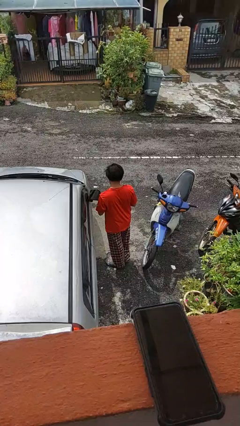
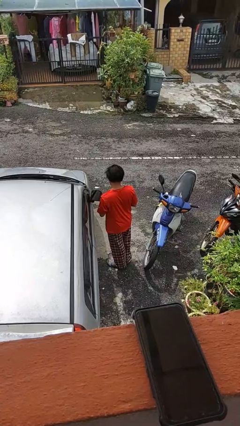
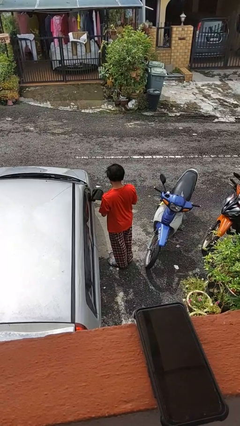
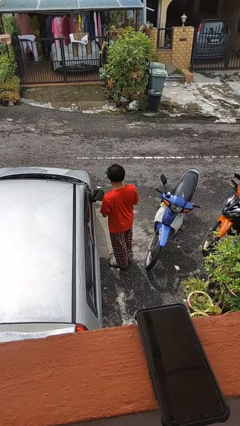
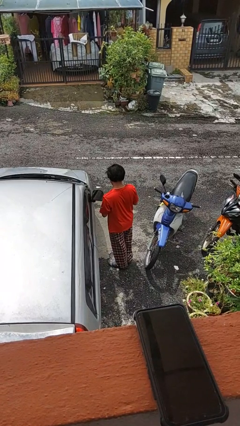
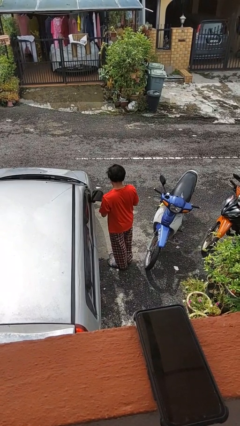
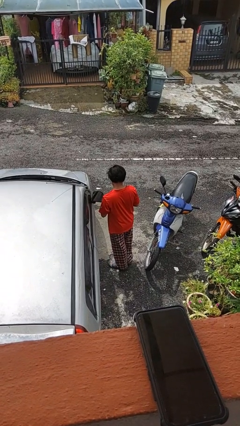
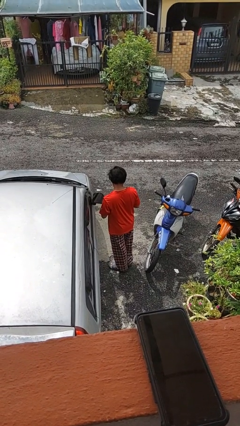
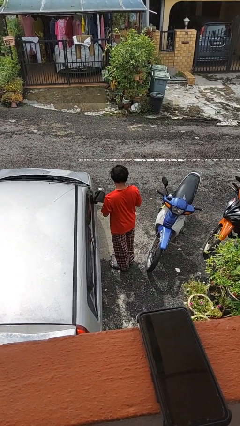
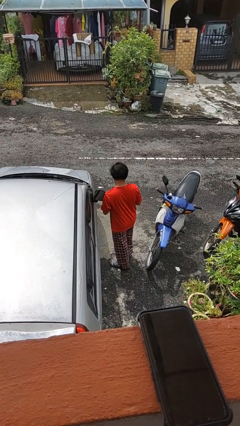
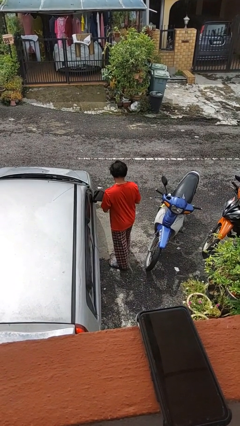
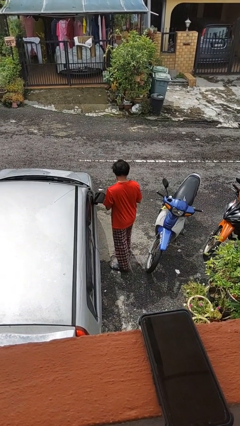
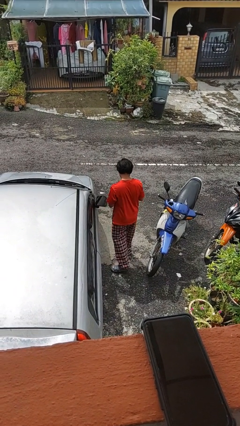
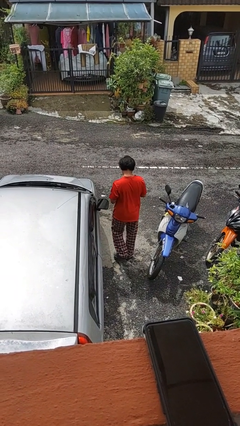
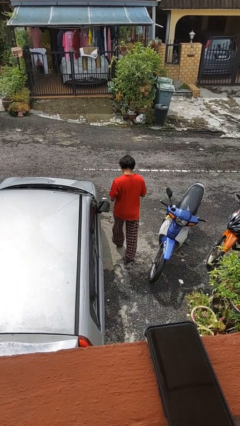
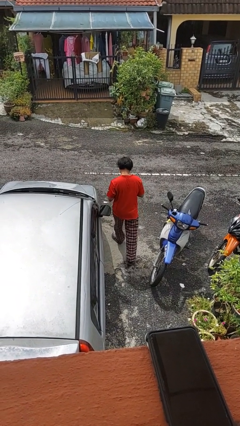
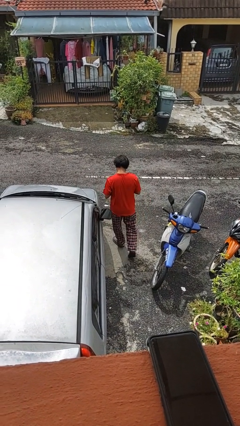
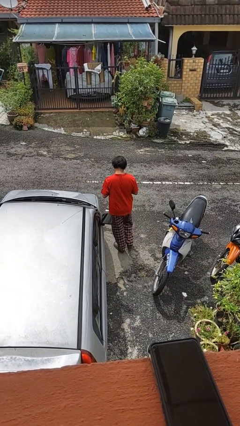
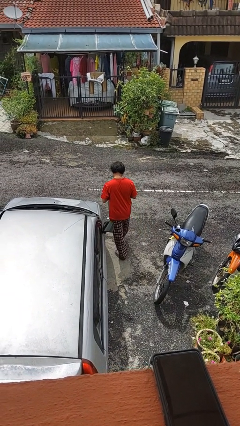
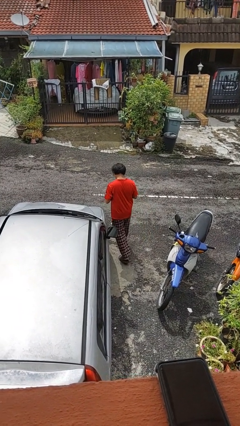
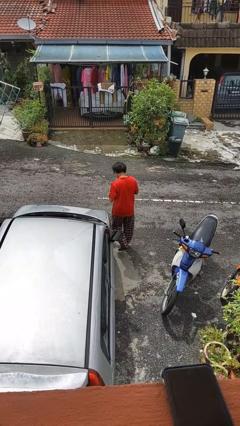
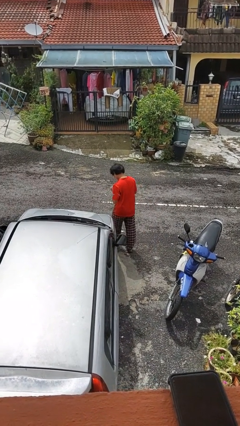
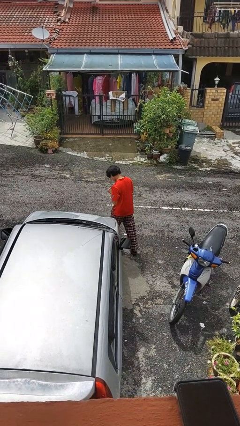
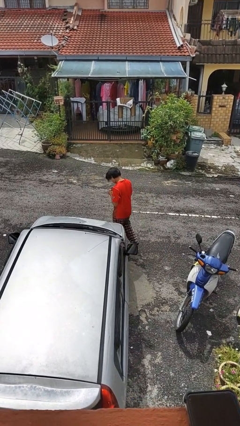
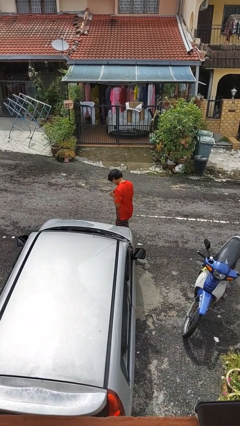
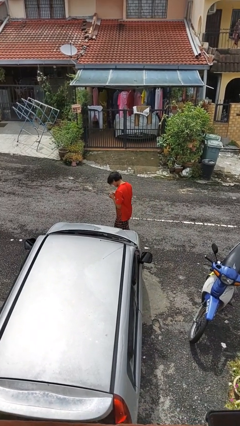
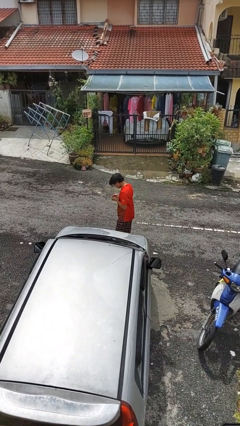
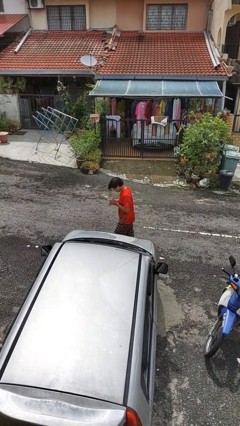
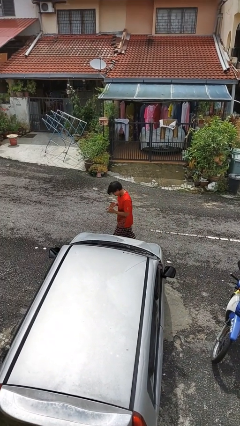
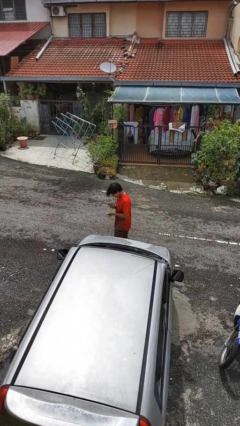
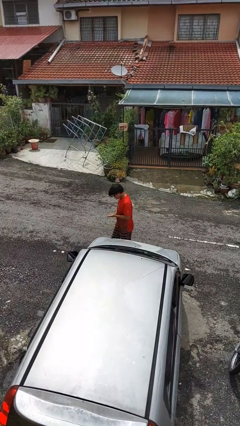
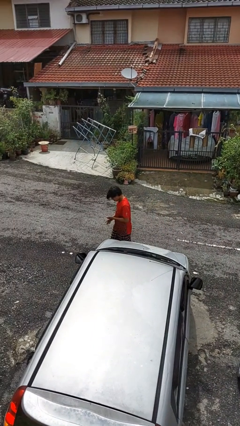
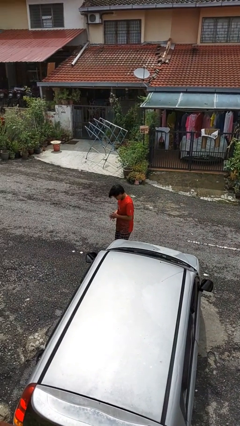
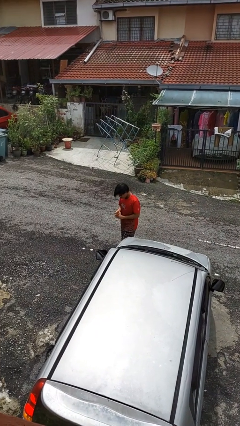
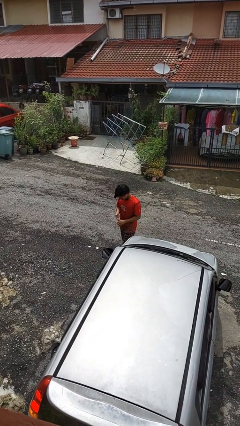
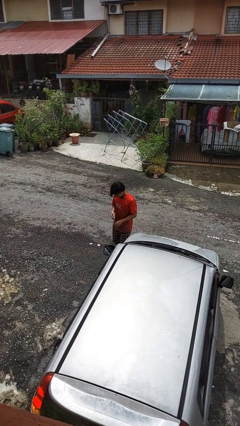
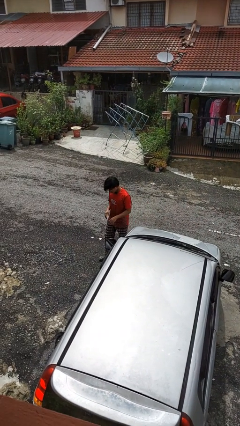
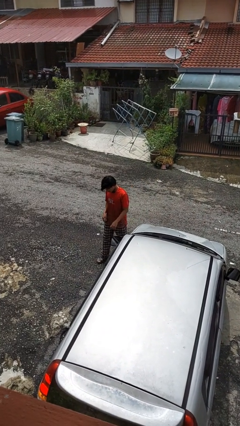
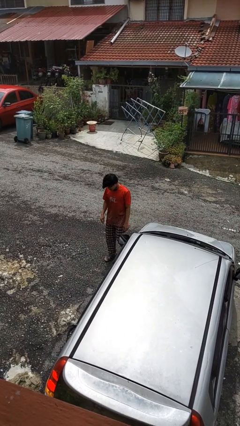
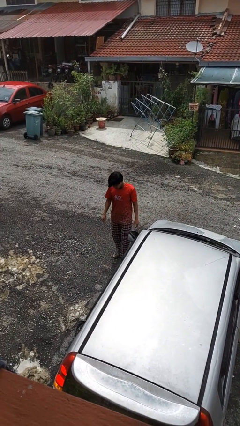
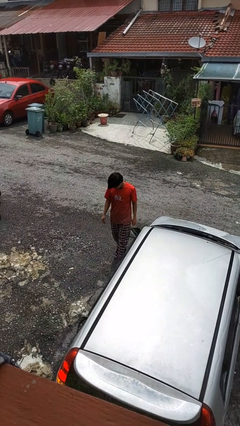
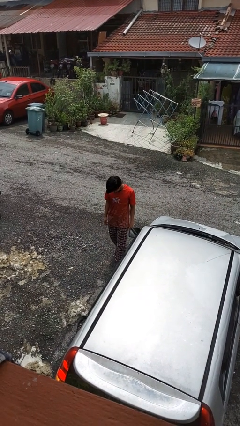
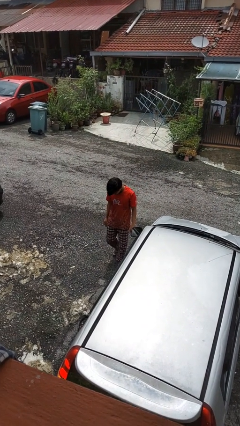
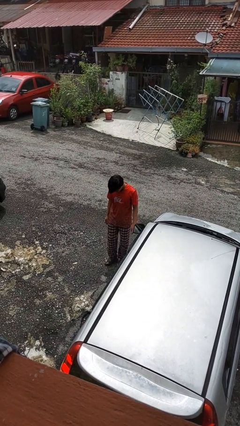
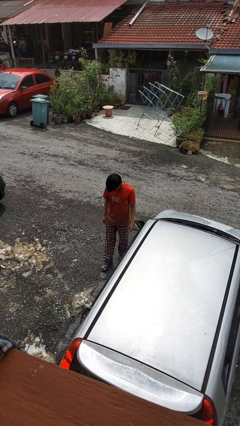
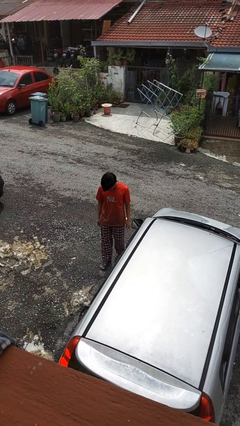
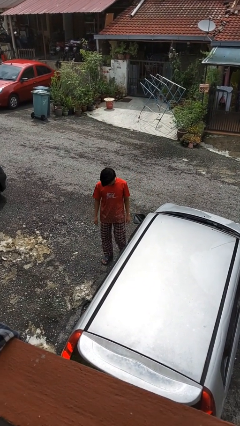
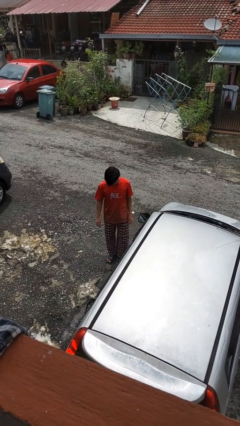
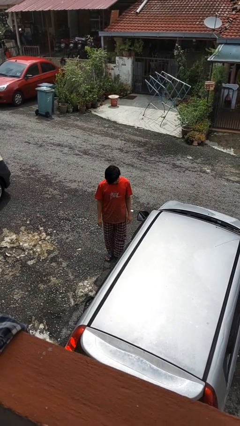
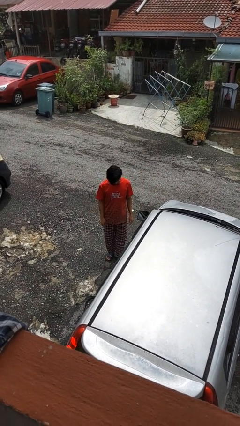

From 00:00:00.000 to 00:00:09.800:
person walks around car

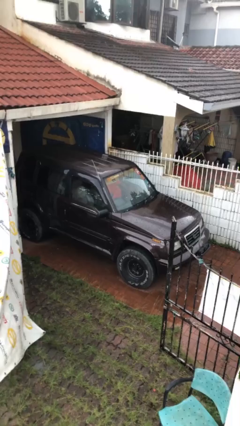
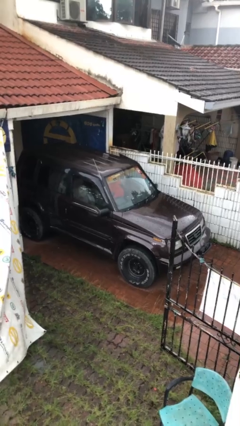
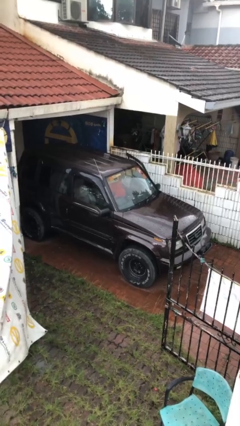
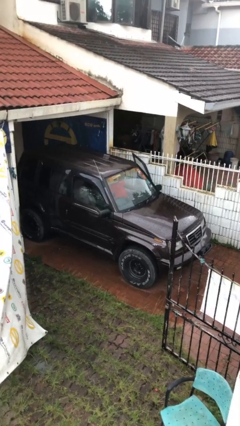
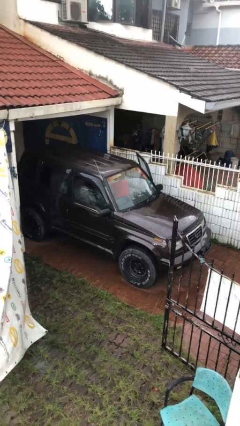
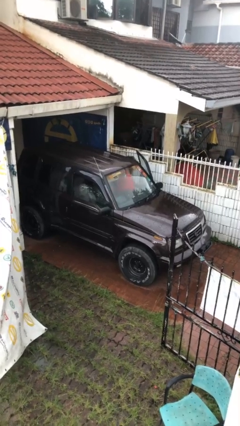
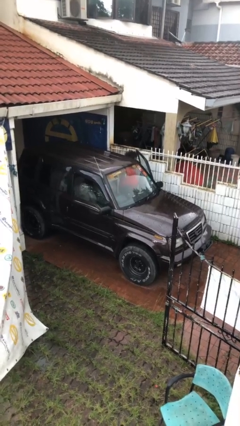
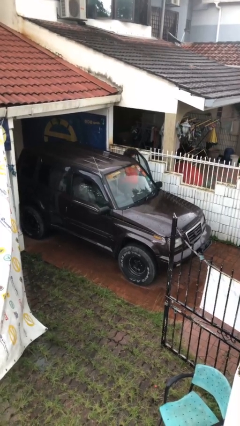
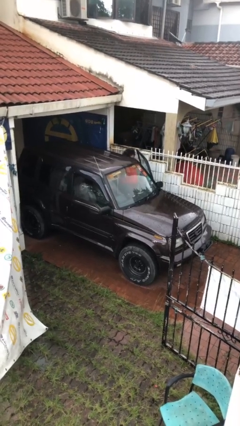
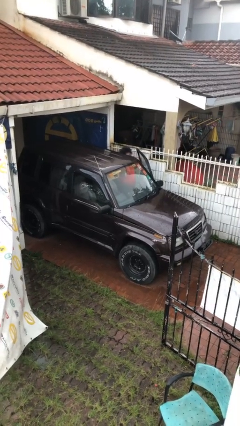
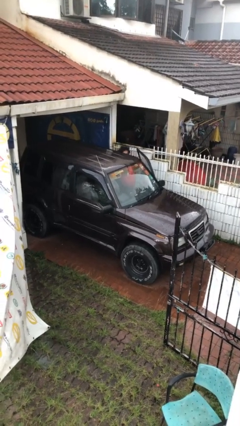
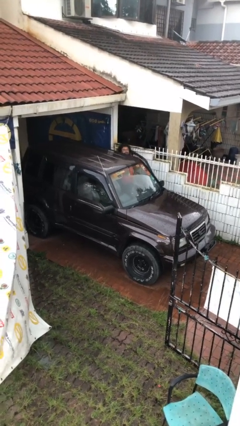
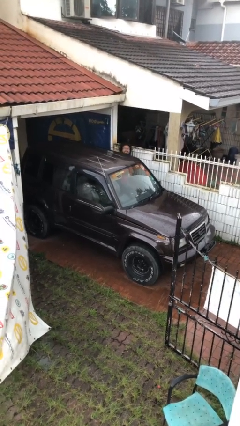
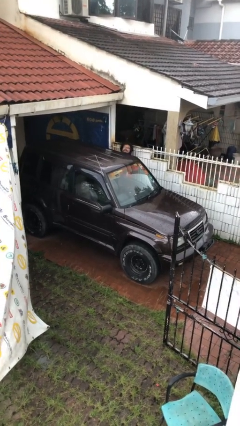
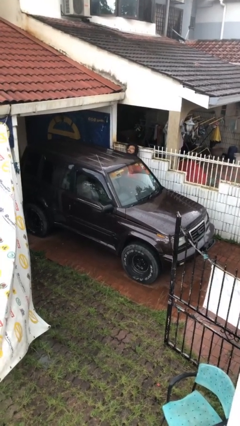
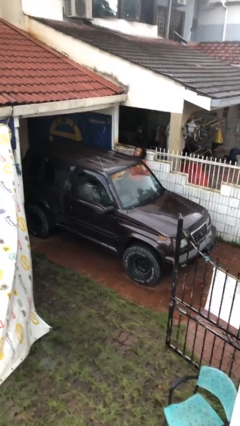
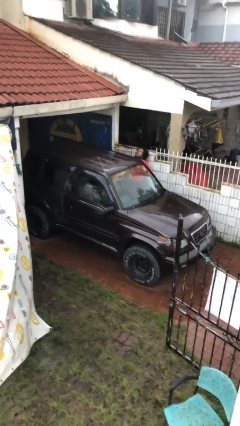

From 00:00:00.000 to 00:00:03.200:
car drops off person

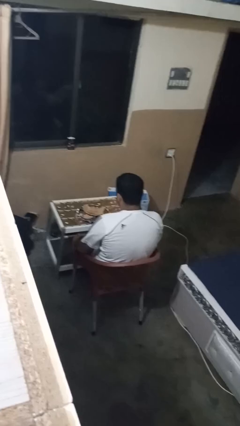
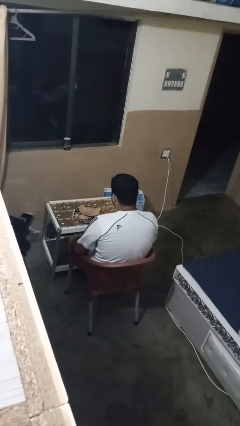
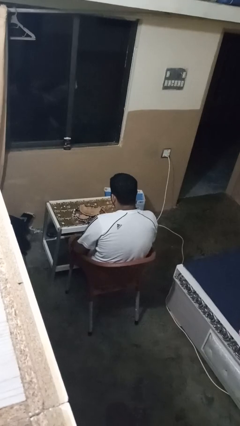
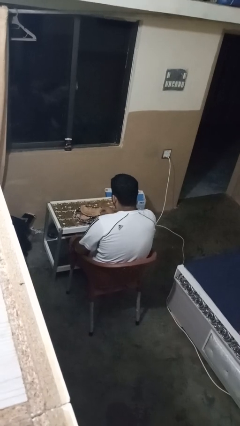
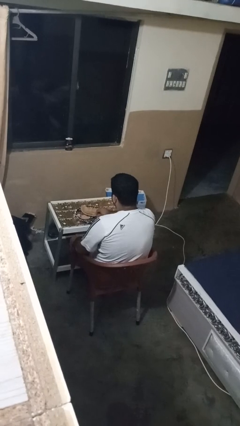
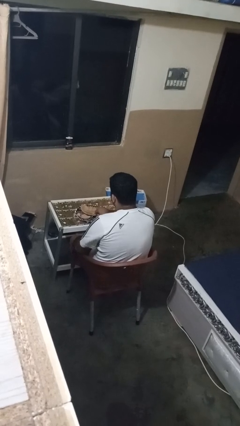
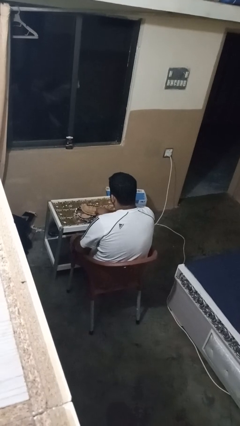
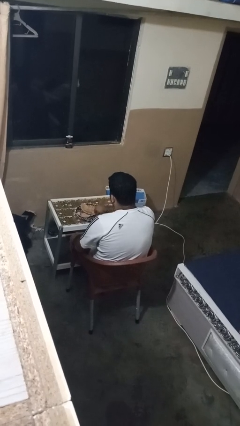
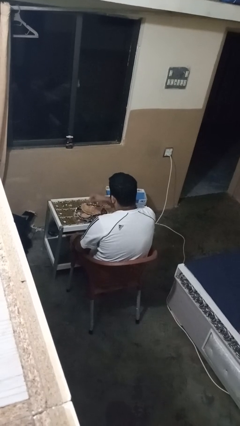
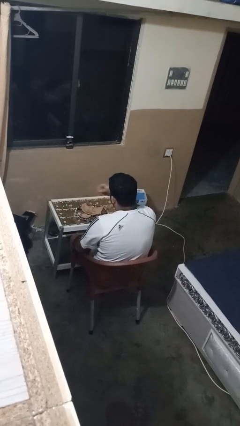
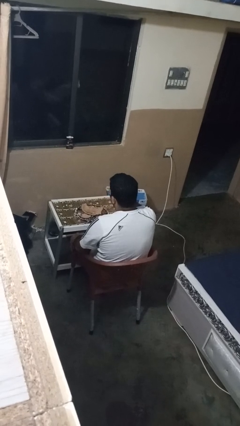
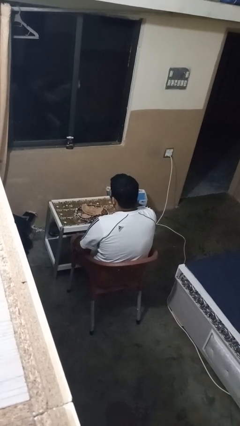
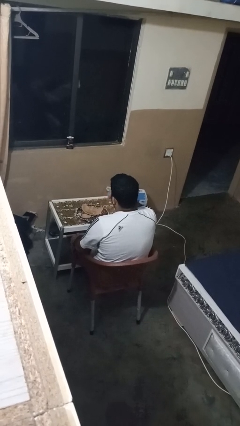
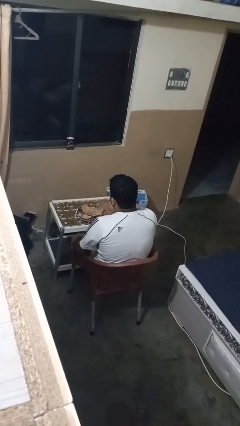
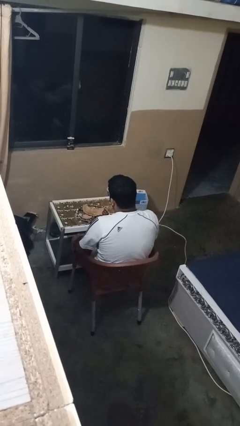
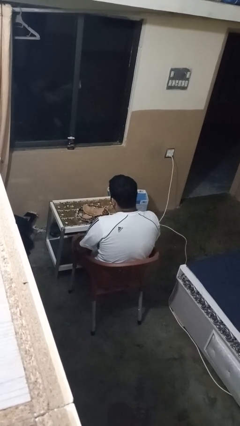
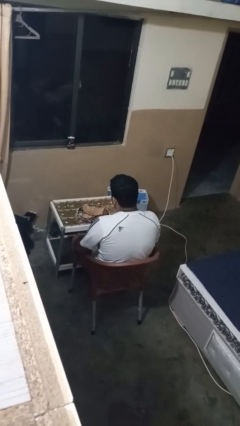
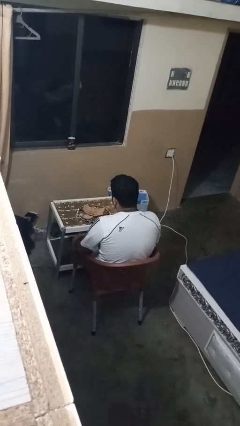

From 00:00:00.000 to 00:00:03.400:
person eats with hands

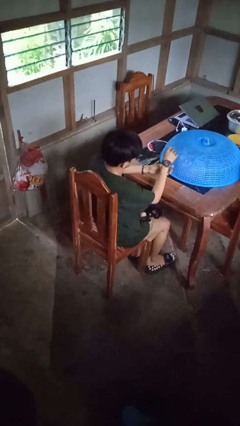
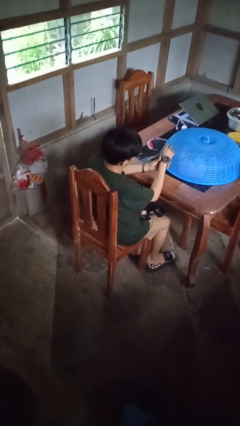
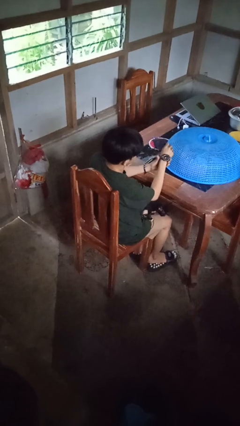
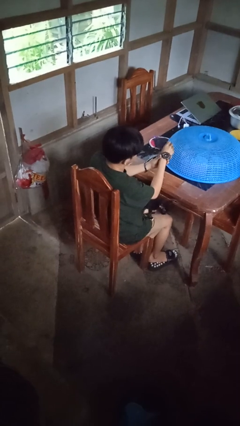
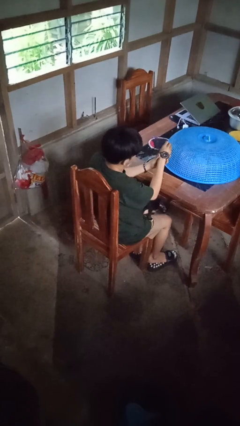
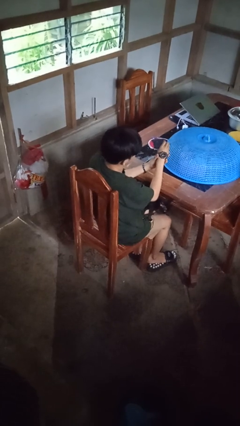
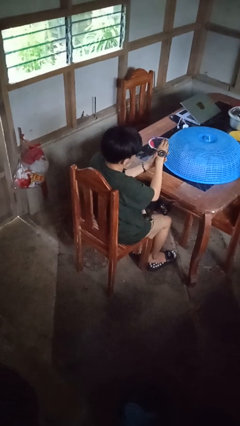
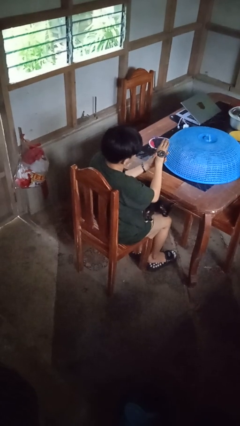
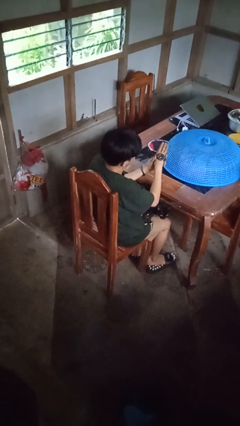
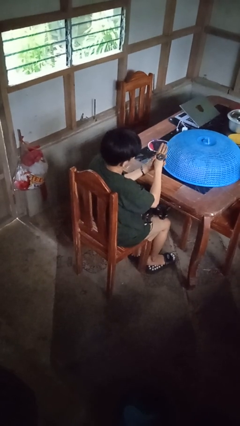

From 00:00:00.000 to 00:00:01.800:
person takes off wristwatch
